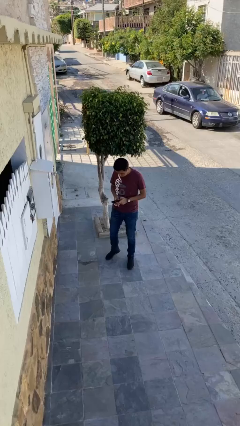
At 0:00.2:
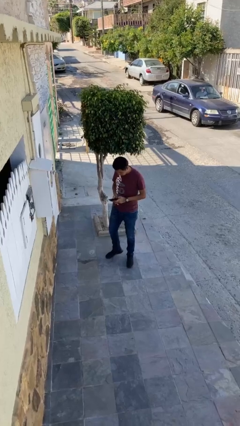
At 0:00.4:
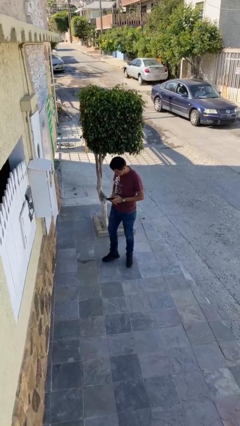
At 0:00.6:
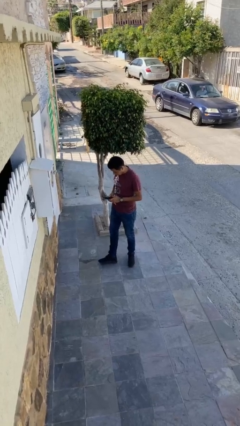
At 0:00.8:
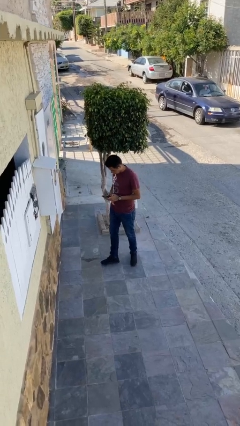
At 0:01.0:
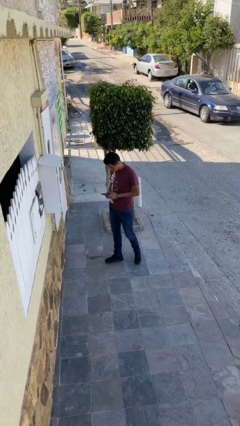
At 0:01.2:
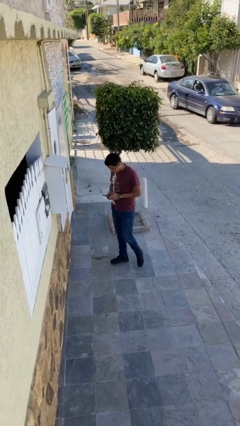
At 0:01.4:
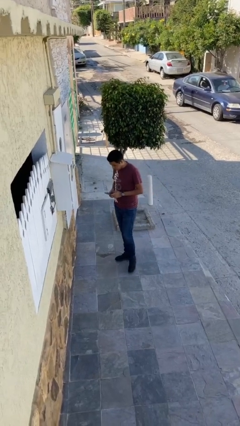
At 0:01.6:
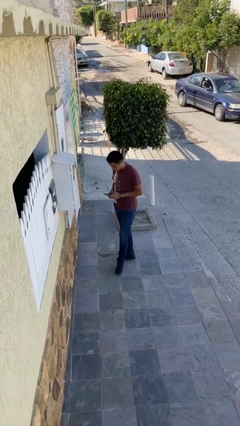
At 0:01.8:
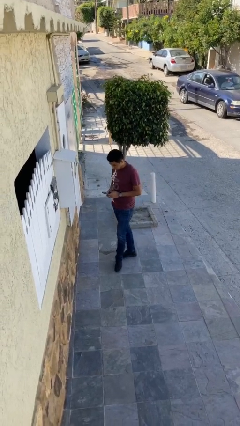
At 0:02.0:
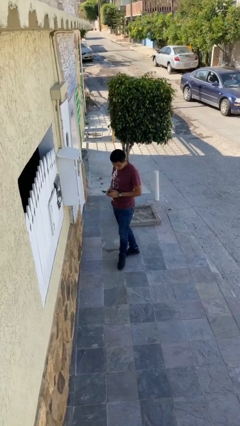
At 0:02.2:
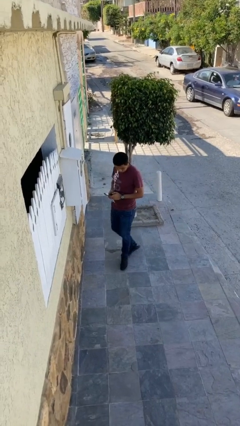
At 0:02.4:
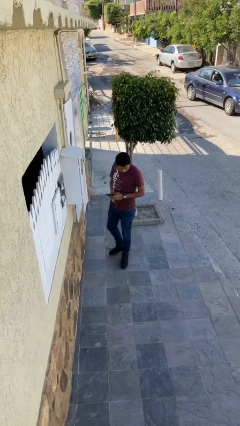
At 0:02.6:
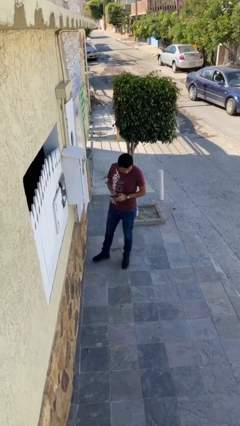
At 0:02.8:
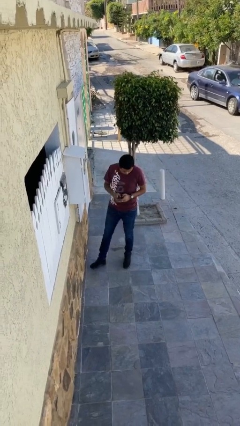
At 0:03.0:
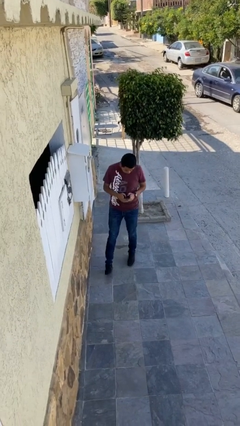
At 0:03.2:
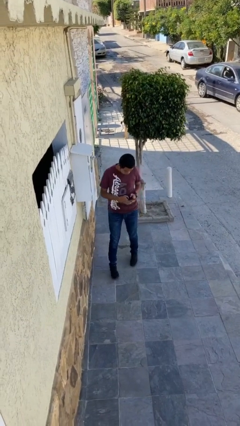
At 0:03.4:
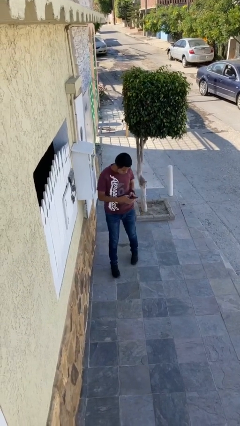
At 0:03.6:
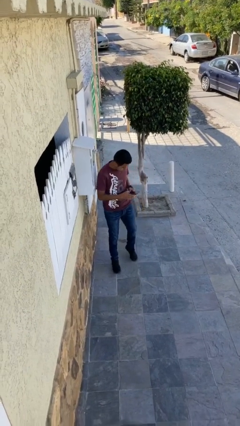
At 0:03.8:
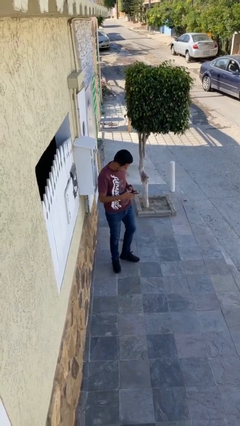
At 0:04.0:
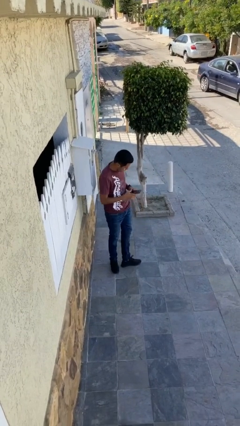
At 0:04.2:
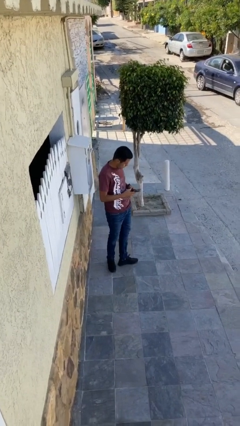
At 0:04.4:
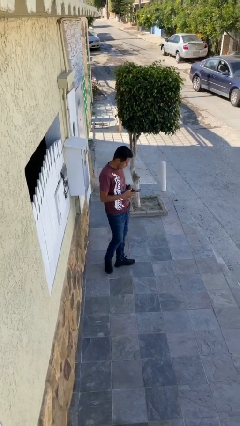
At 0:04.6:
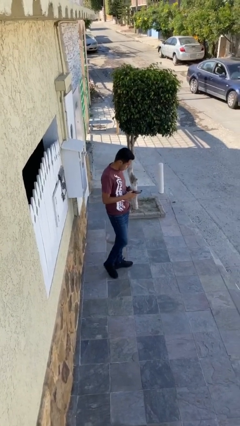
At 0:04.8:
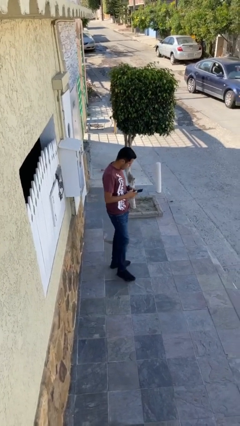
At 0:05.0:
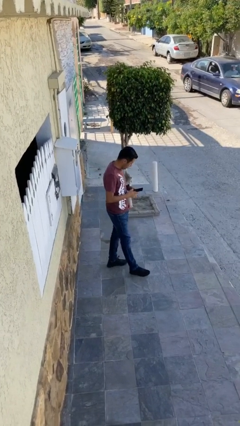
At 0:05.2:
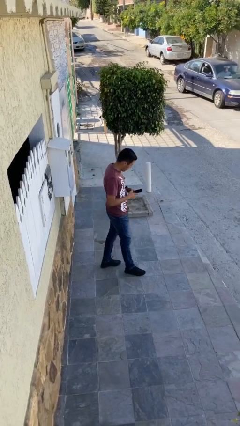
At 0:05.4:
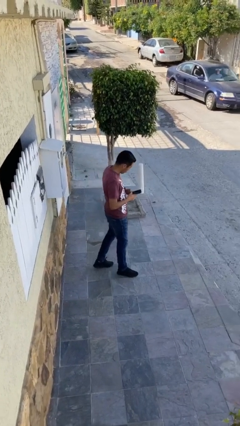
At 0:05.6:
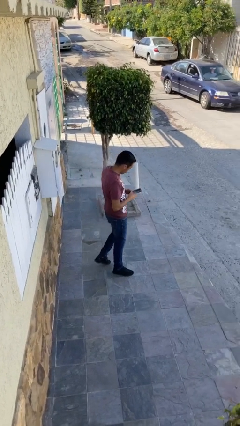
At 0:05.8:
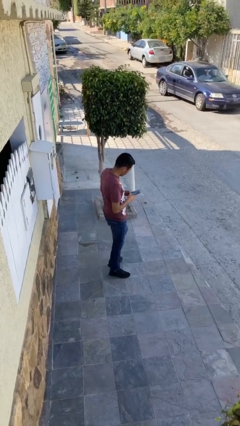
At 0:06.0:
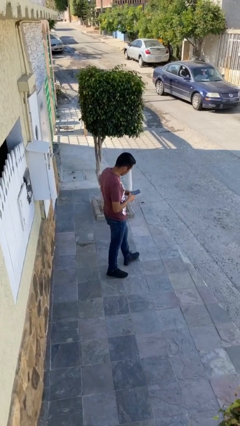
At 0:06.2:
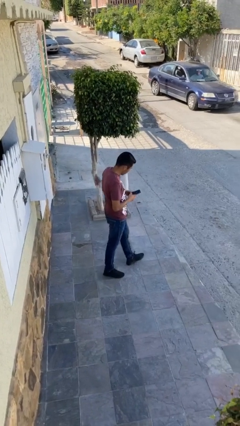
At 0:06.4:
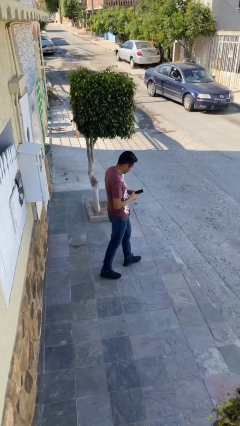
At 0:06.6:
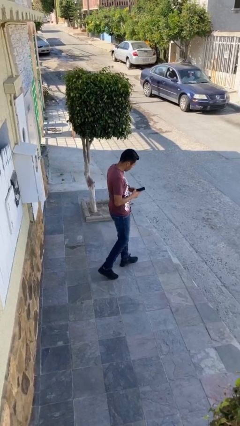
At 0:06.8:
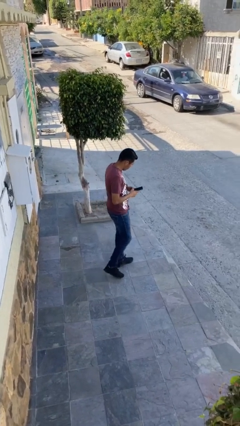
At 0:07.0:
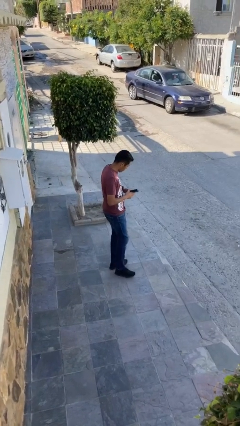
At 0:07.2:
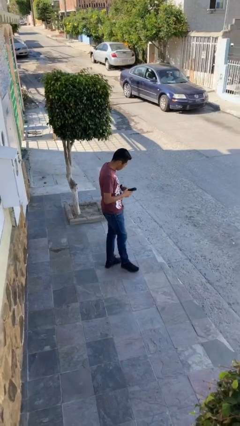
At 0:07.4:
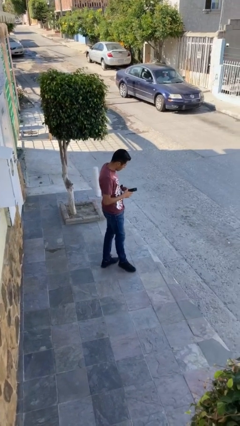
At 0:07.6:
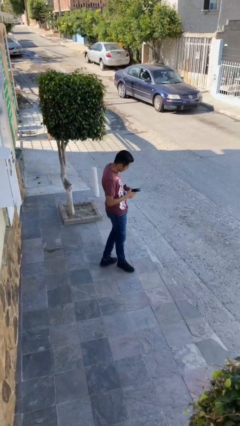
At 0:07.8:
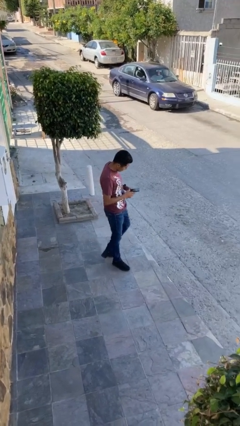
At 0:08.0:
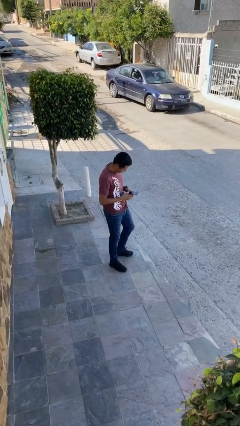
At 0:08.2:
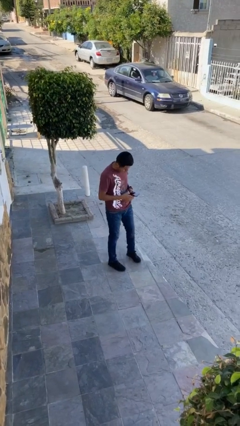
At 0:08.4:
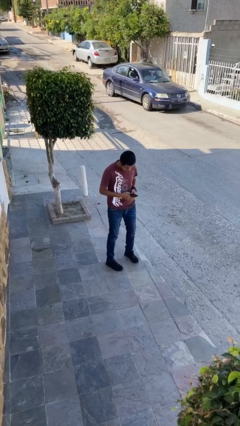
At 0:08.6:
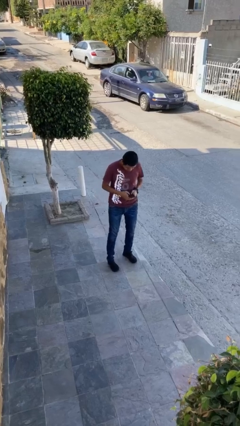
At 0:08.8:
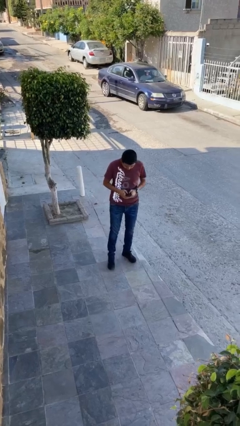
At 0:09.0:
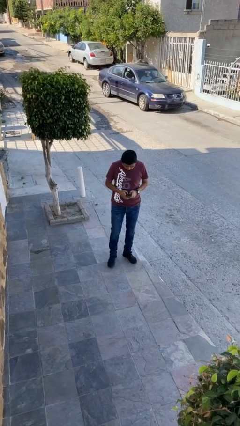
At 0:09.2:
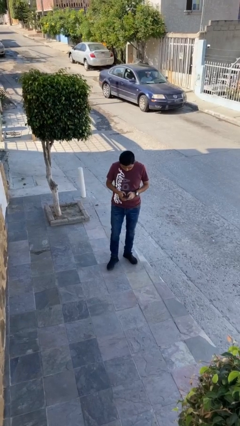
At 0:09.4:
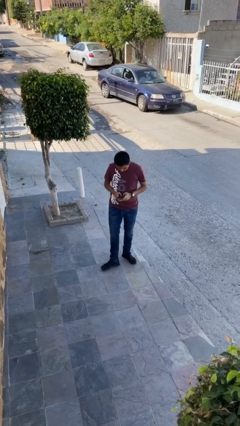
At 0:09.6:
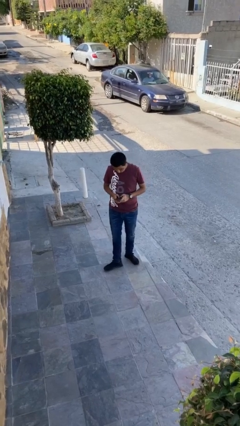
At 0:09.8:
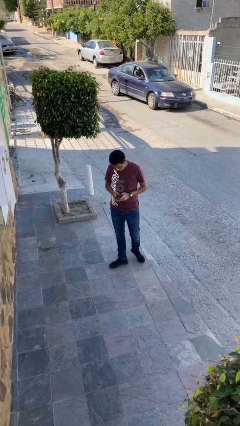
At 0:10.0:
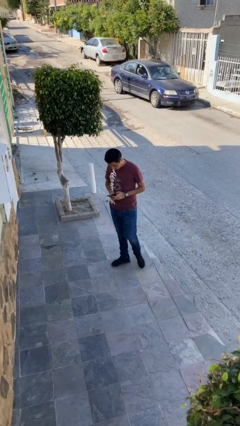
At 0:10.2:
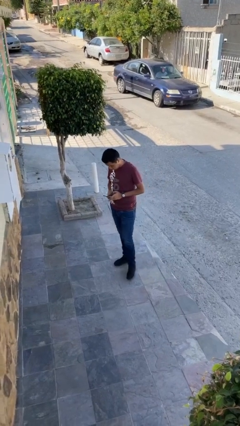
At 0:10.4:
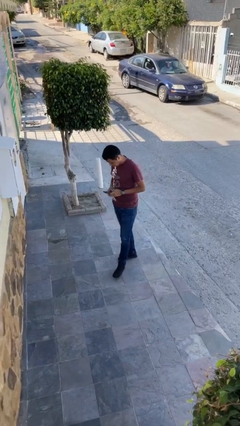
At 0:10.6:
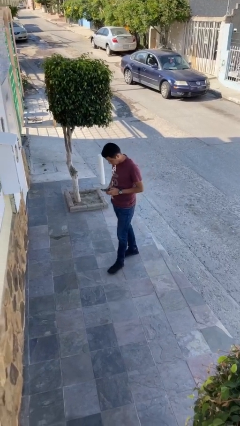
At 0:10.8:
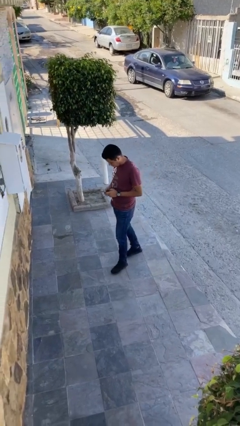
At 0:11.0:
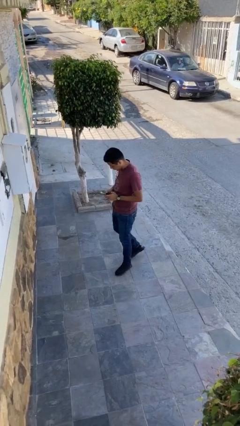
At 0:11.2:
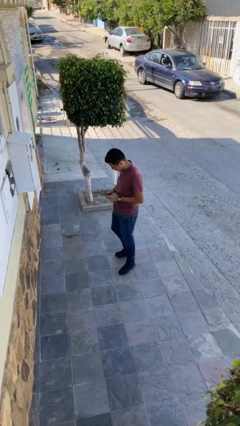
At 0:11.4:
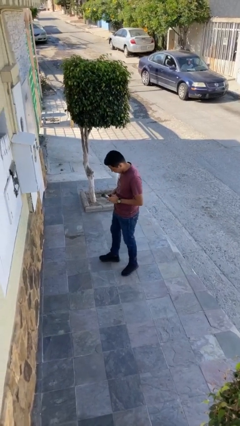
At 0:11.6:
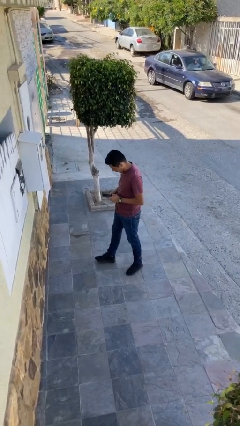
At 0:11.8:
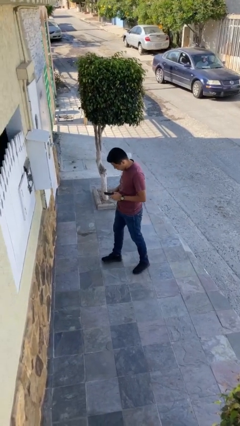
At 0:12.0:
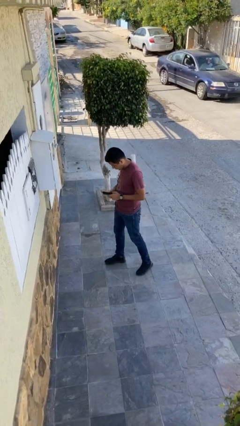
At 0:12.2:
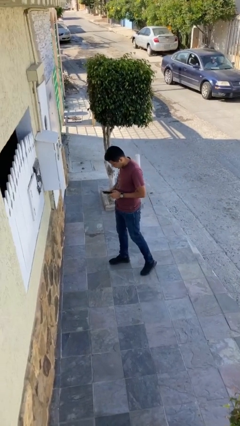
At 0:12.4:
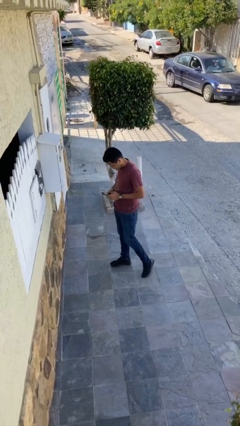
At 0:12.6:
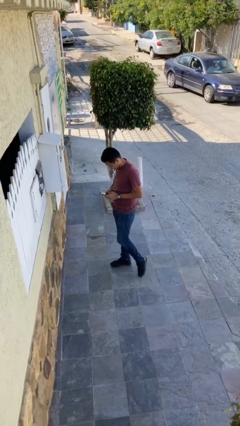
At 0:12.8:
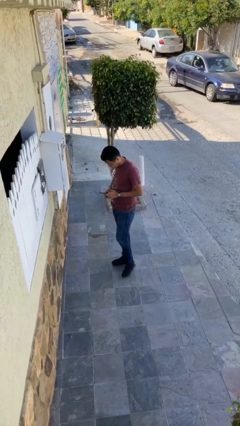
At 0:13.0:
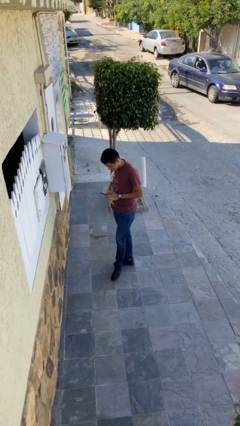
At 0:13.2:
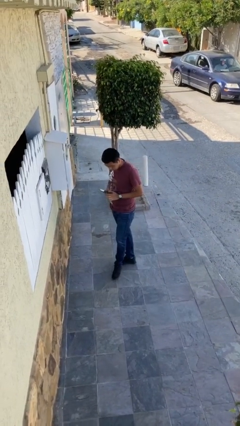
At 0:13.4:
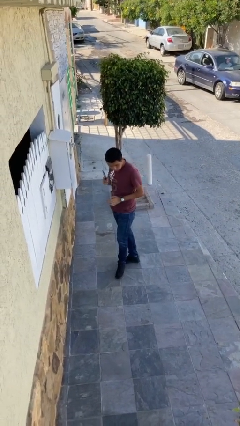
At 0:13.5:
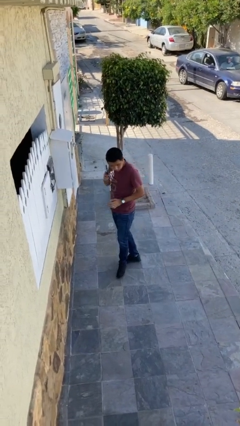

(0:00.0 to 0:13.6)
person texts on phone

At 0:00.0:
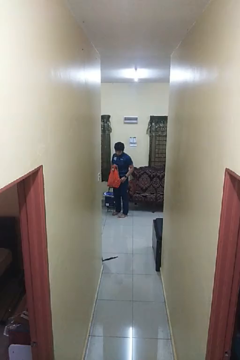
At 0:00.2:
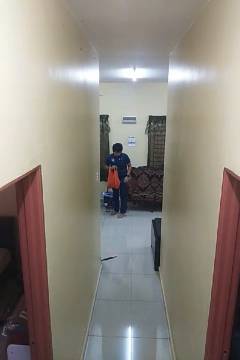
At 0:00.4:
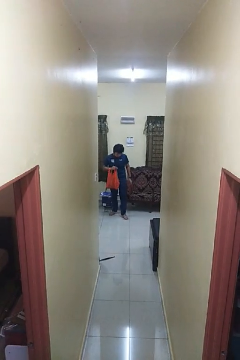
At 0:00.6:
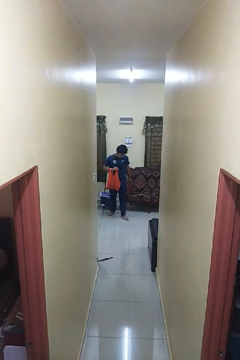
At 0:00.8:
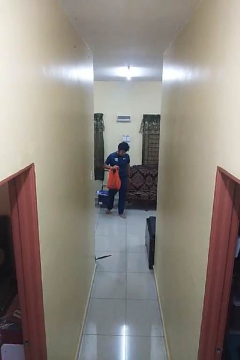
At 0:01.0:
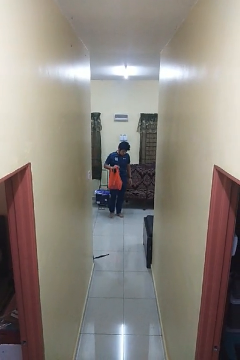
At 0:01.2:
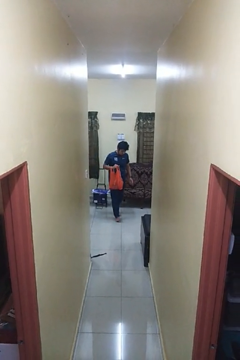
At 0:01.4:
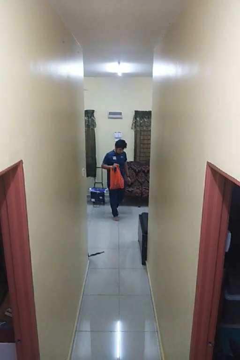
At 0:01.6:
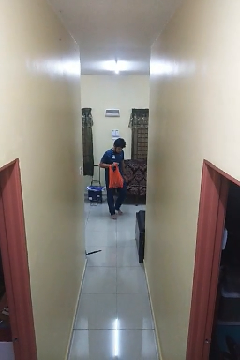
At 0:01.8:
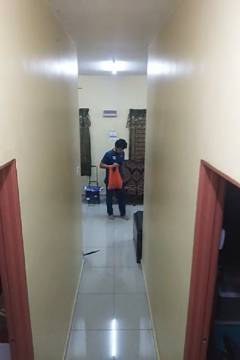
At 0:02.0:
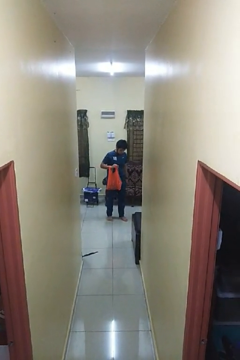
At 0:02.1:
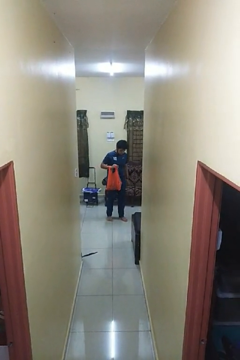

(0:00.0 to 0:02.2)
person carries groceries

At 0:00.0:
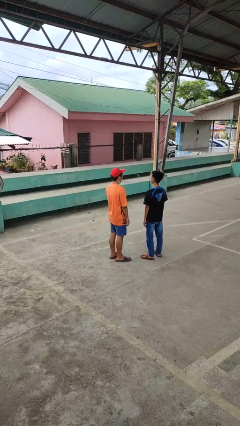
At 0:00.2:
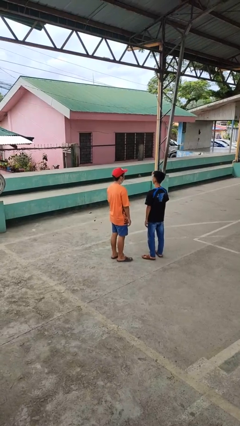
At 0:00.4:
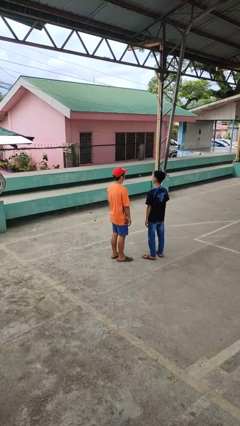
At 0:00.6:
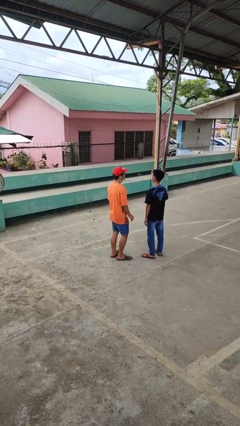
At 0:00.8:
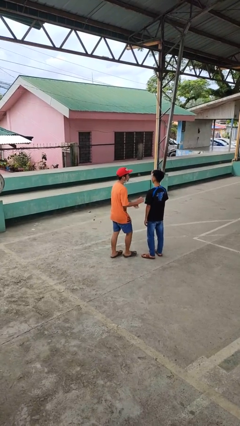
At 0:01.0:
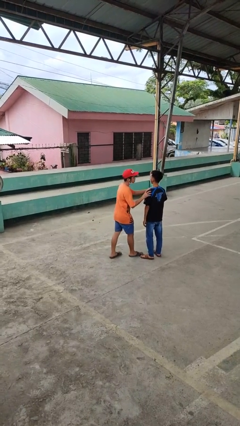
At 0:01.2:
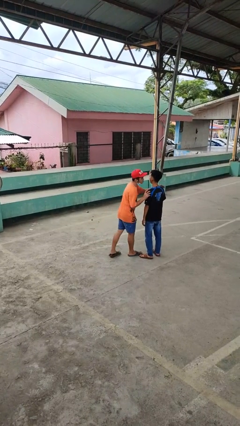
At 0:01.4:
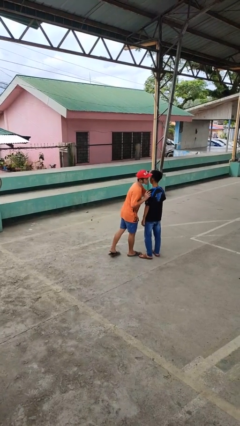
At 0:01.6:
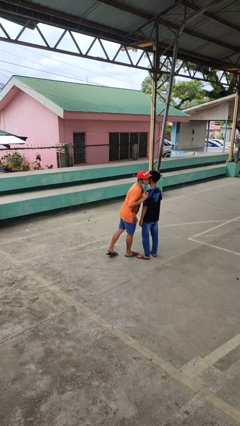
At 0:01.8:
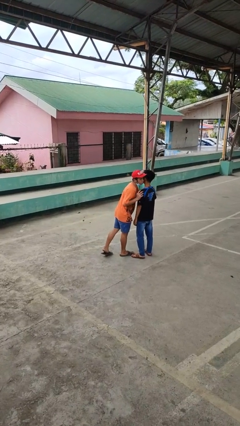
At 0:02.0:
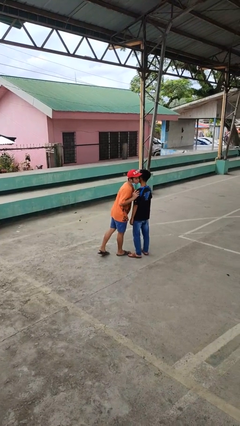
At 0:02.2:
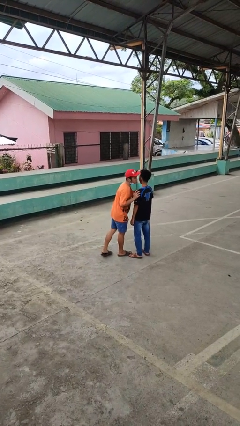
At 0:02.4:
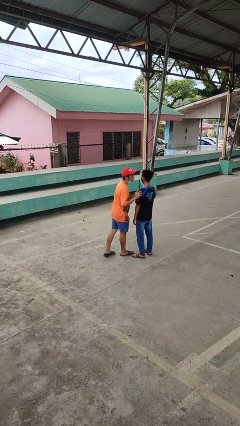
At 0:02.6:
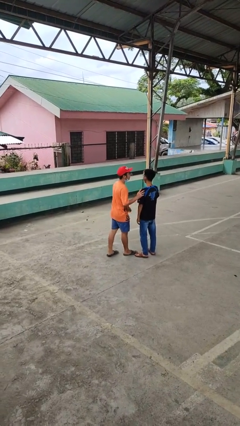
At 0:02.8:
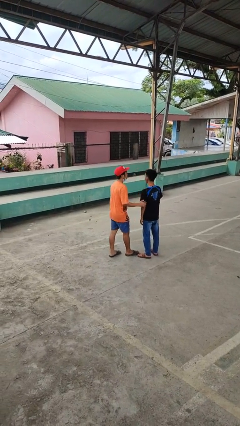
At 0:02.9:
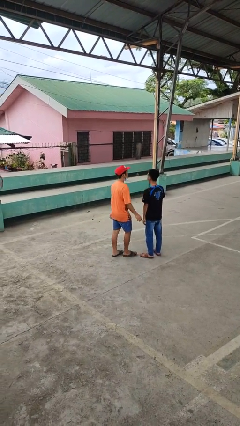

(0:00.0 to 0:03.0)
person kisses cheek of person
